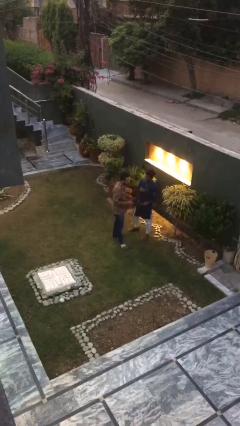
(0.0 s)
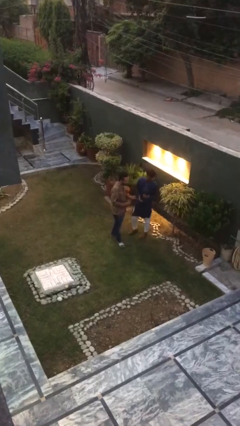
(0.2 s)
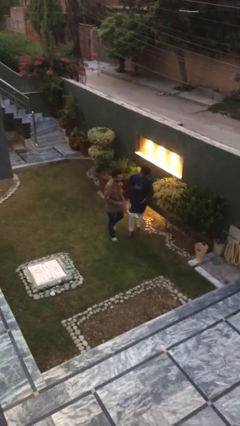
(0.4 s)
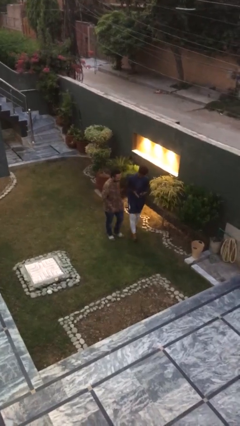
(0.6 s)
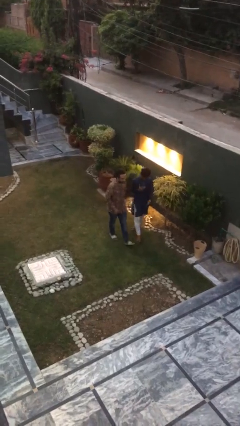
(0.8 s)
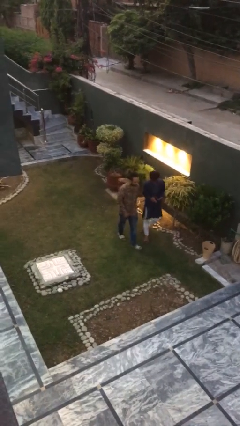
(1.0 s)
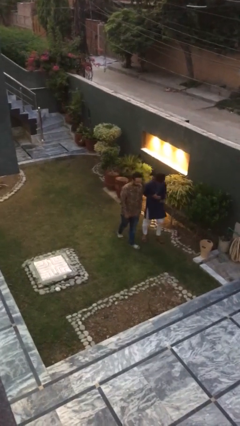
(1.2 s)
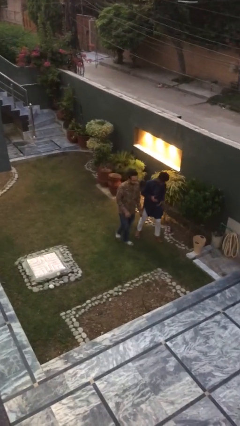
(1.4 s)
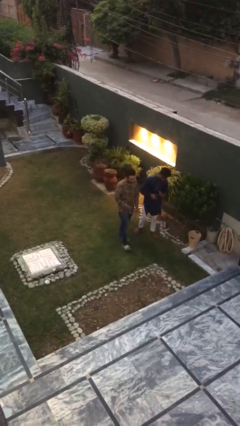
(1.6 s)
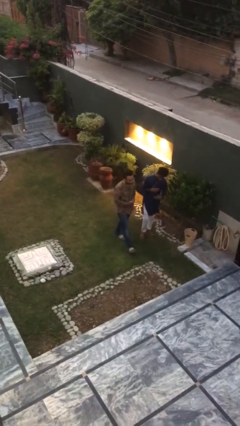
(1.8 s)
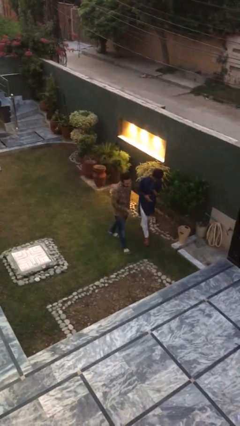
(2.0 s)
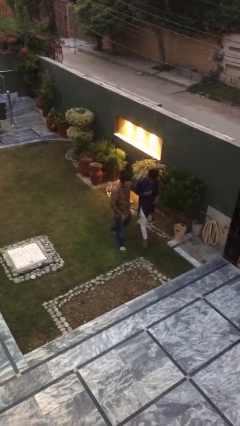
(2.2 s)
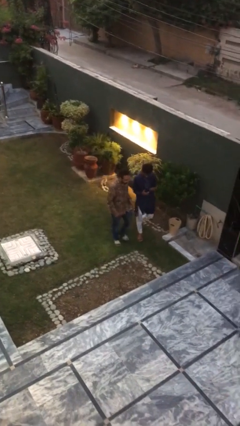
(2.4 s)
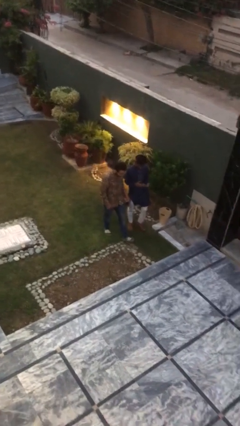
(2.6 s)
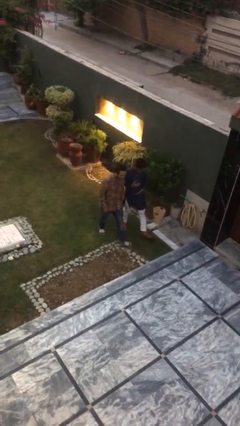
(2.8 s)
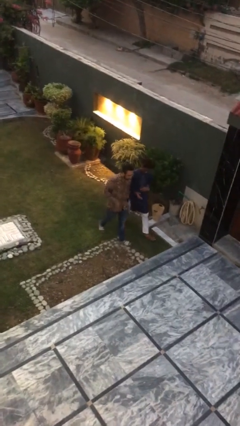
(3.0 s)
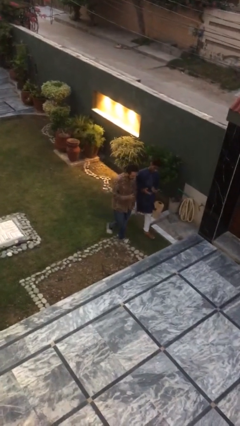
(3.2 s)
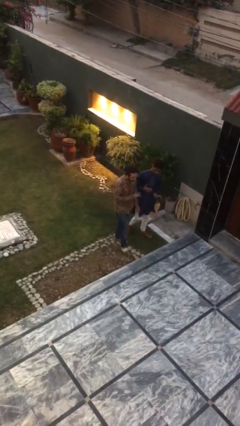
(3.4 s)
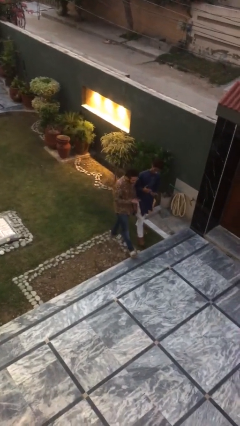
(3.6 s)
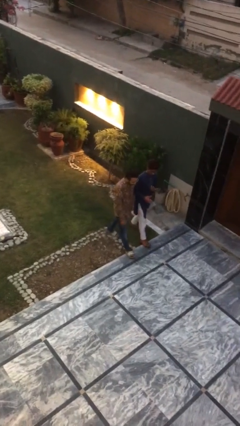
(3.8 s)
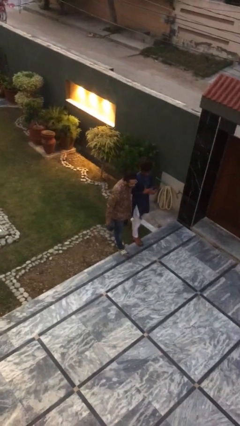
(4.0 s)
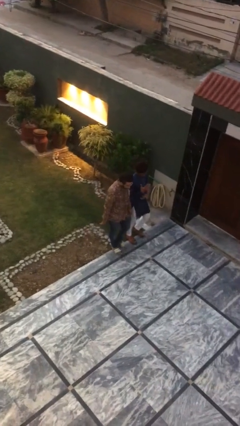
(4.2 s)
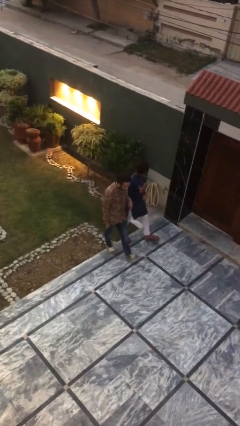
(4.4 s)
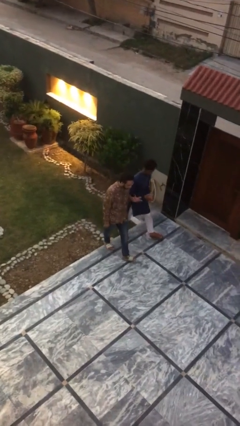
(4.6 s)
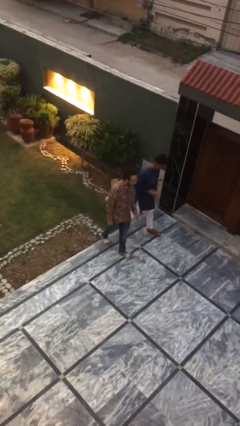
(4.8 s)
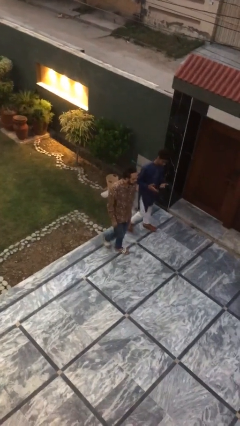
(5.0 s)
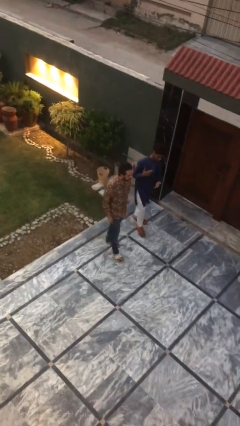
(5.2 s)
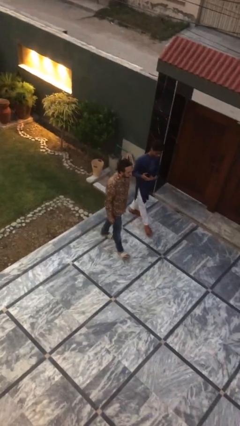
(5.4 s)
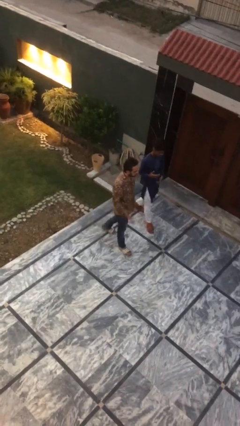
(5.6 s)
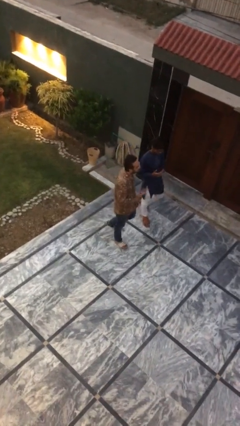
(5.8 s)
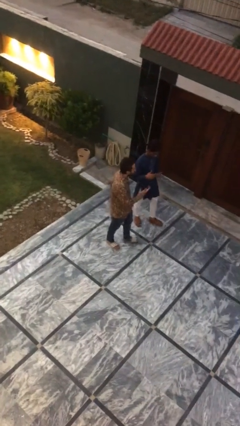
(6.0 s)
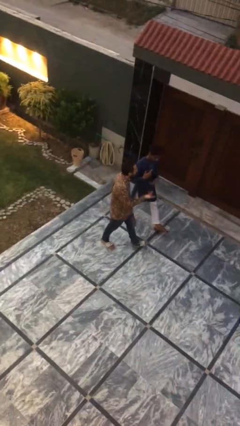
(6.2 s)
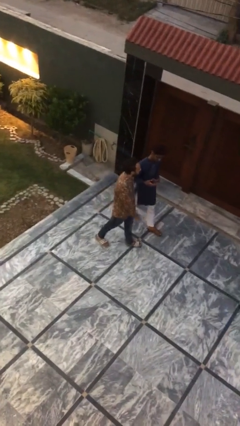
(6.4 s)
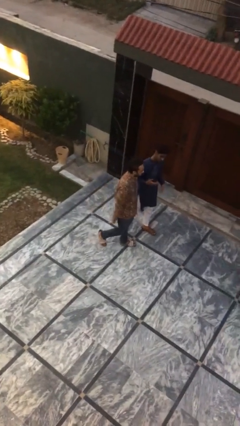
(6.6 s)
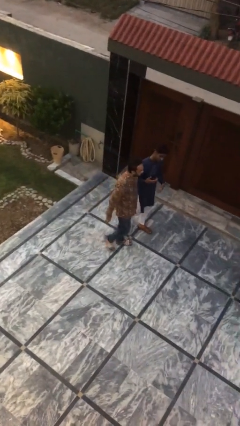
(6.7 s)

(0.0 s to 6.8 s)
person talks to person

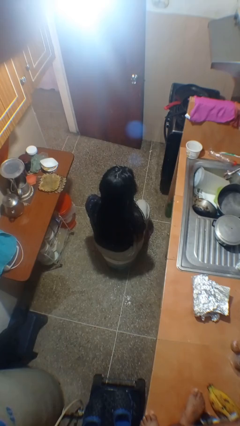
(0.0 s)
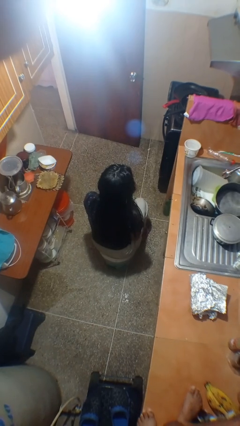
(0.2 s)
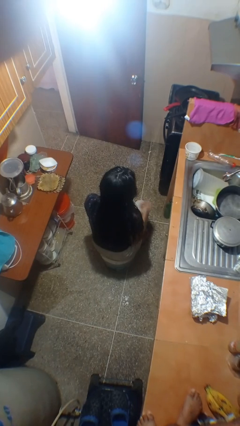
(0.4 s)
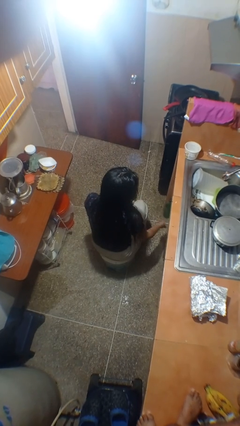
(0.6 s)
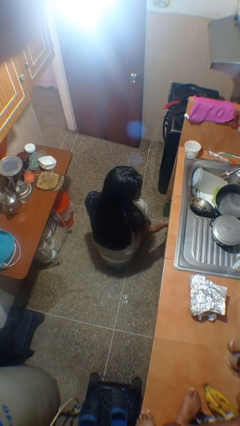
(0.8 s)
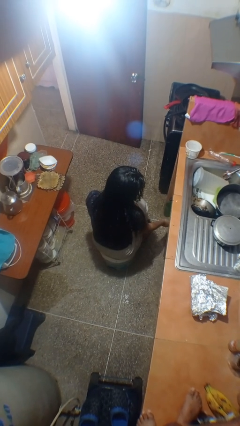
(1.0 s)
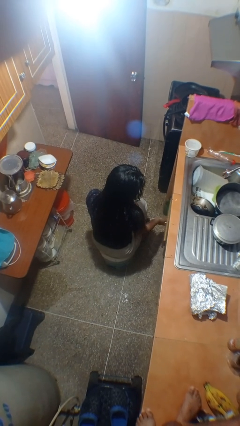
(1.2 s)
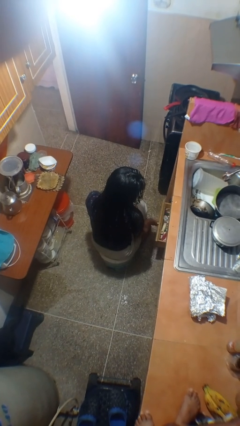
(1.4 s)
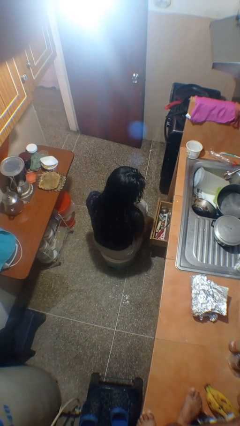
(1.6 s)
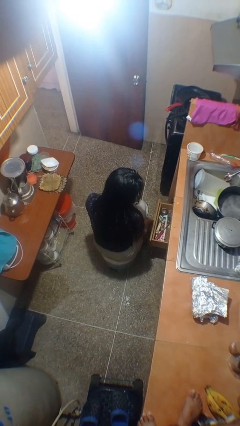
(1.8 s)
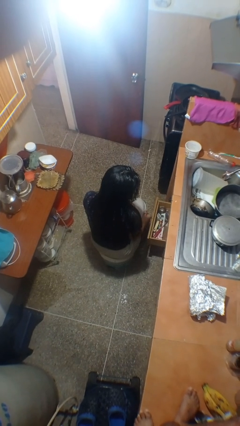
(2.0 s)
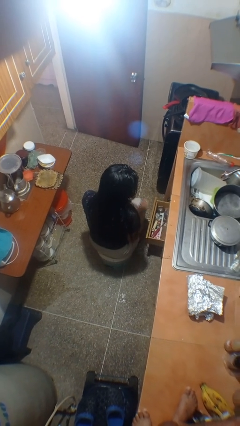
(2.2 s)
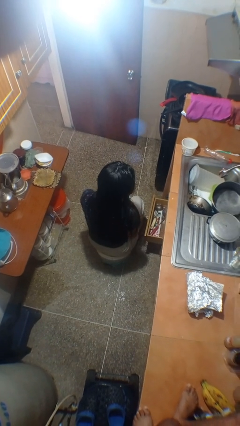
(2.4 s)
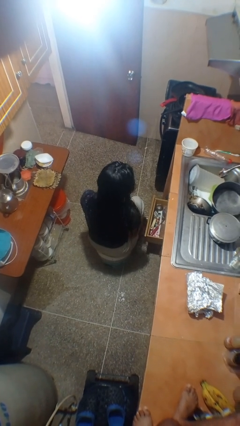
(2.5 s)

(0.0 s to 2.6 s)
person opens kitchen drawer

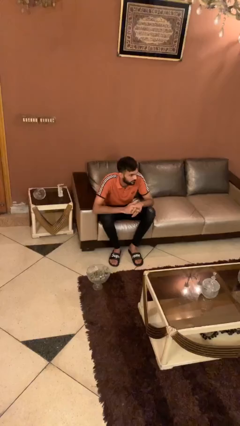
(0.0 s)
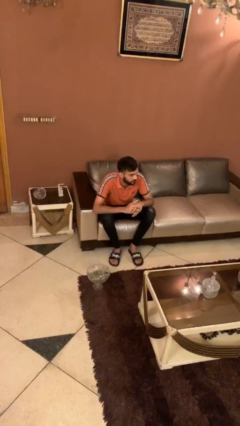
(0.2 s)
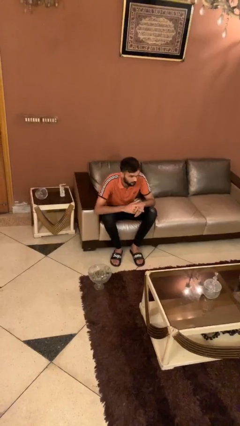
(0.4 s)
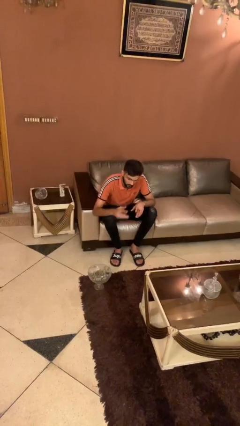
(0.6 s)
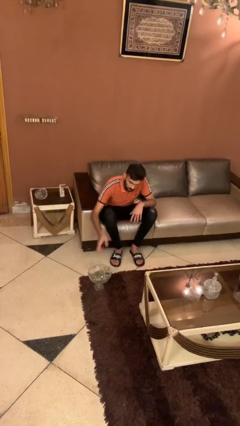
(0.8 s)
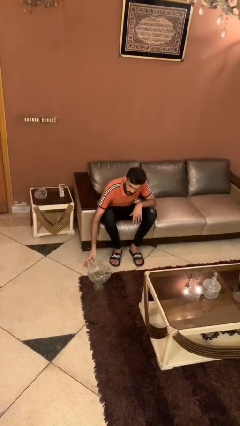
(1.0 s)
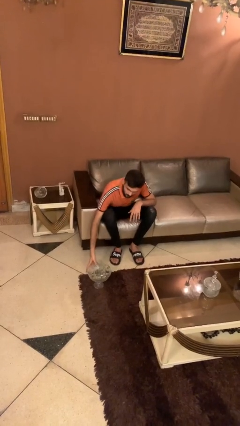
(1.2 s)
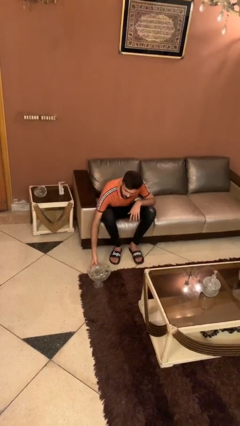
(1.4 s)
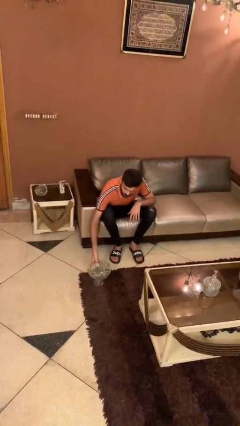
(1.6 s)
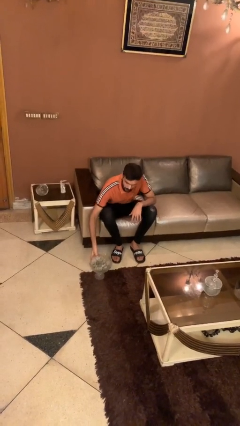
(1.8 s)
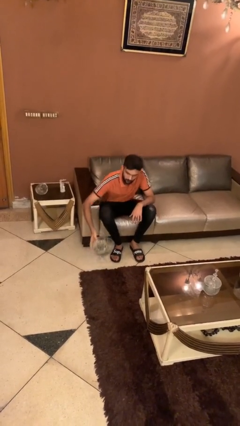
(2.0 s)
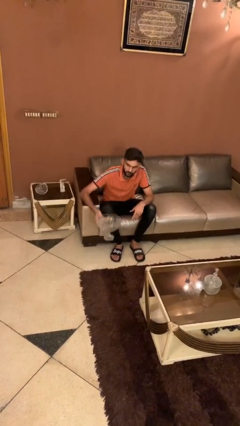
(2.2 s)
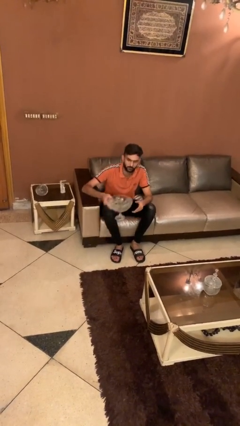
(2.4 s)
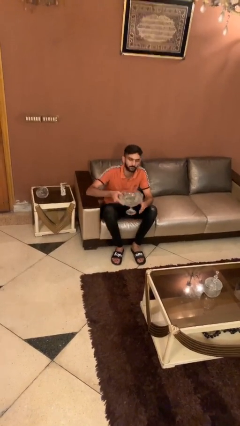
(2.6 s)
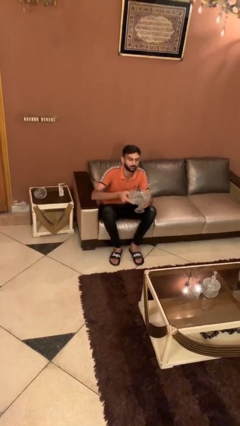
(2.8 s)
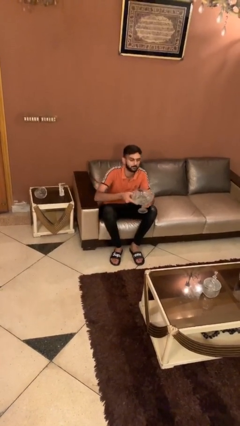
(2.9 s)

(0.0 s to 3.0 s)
person picks up object from floor

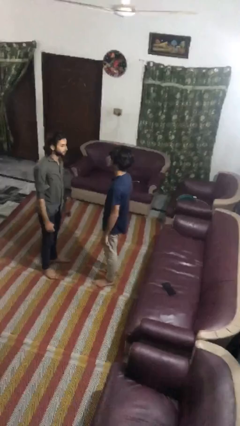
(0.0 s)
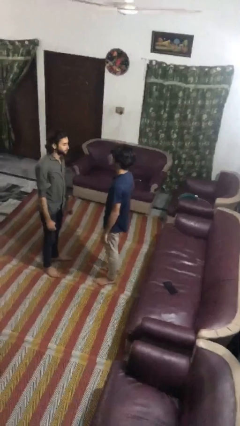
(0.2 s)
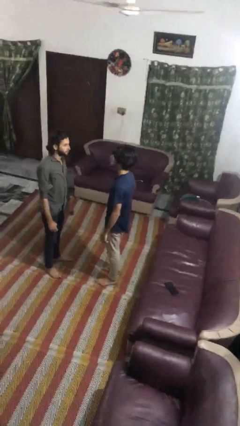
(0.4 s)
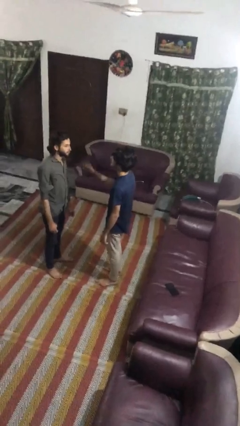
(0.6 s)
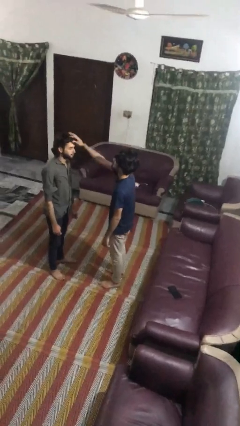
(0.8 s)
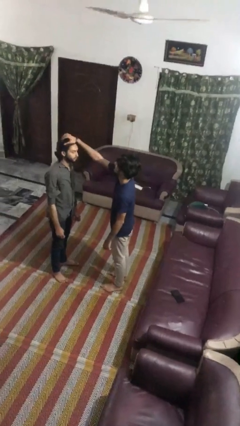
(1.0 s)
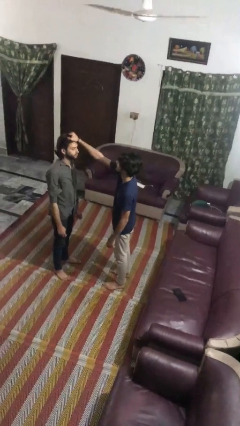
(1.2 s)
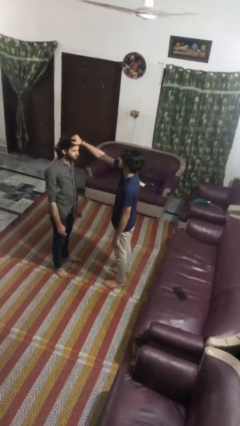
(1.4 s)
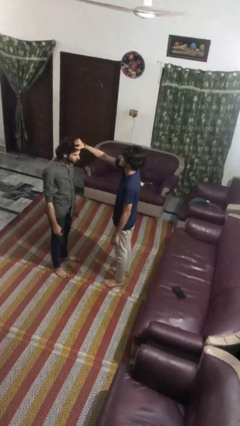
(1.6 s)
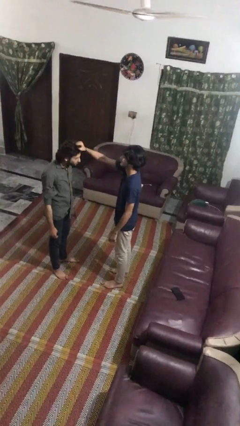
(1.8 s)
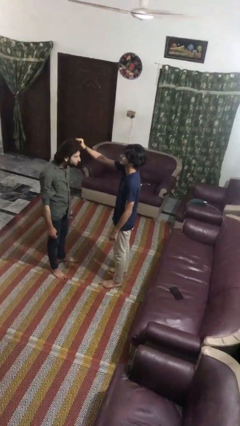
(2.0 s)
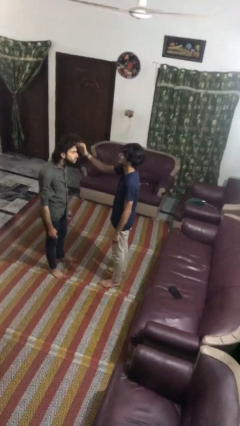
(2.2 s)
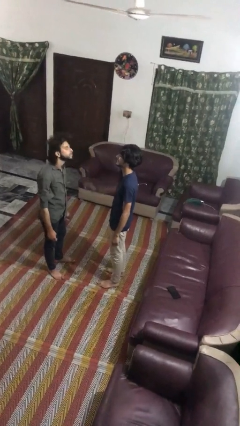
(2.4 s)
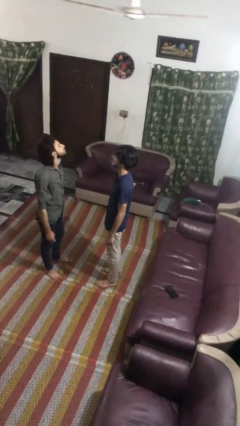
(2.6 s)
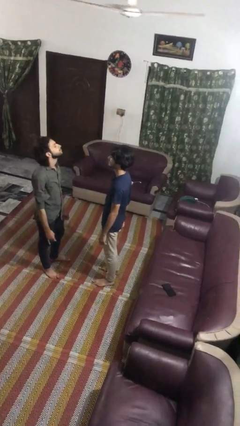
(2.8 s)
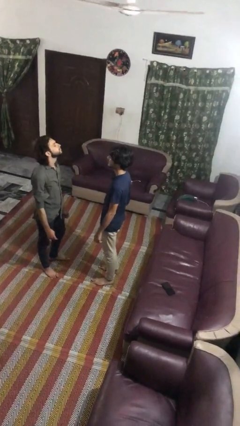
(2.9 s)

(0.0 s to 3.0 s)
person grabs person by hair

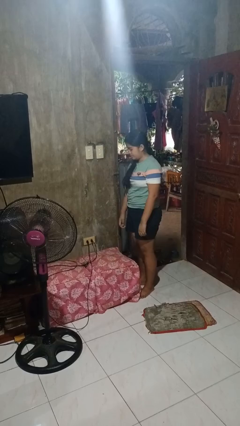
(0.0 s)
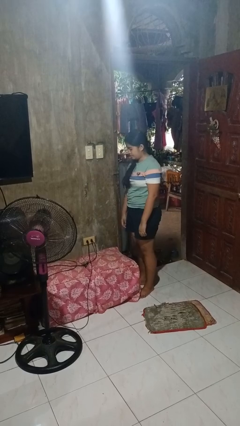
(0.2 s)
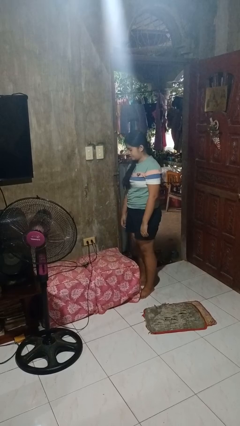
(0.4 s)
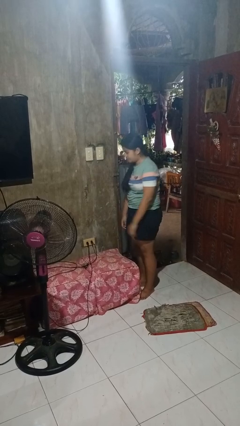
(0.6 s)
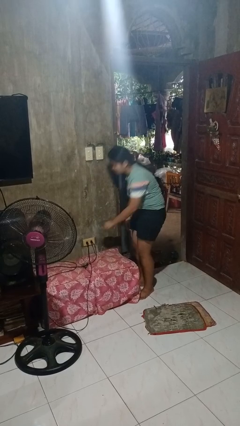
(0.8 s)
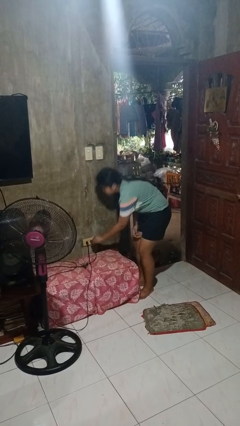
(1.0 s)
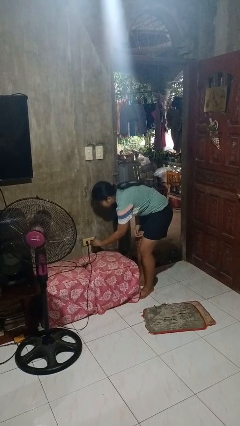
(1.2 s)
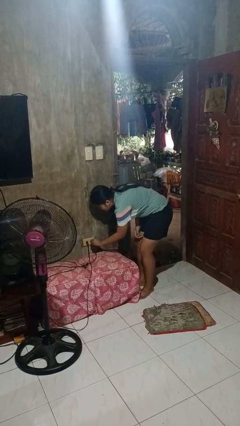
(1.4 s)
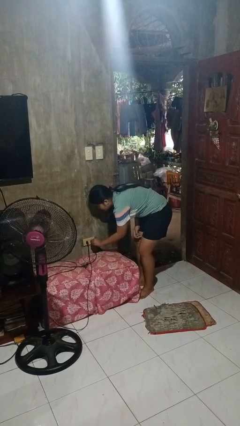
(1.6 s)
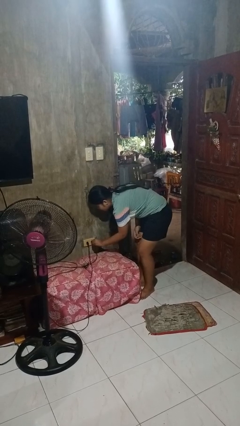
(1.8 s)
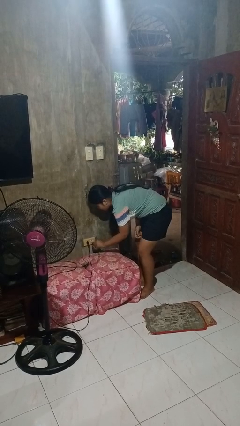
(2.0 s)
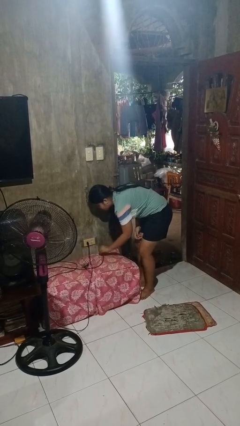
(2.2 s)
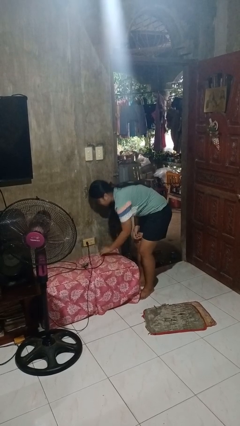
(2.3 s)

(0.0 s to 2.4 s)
person unplugs from electrical socket
